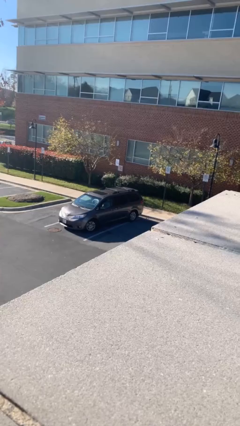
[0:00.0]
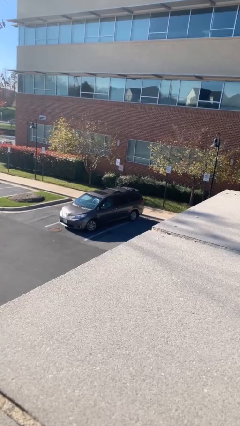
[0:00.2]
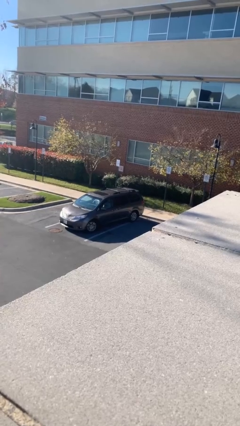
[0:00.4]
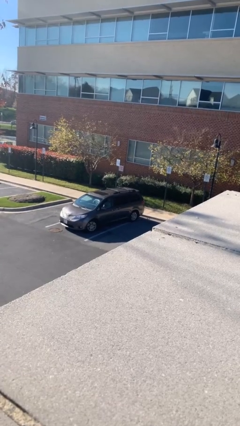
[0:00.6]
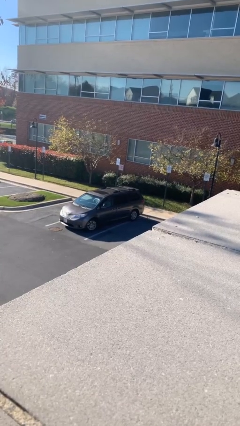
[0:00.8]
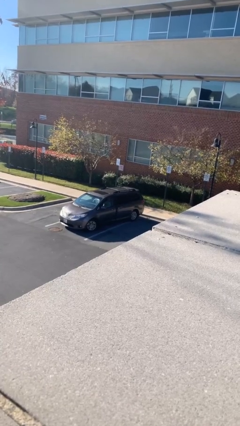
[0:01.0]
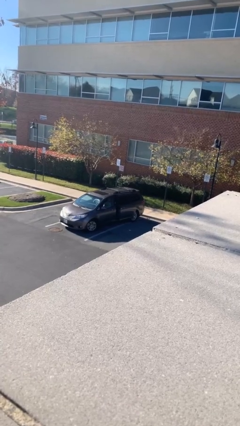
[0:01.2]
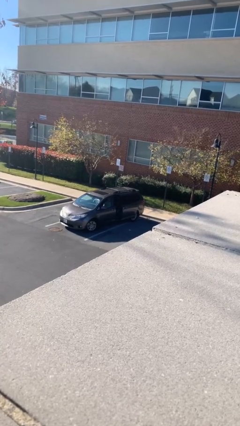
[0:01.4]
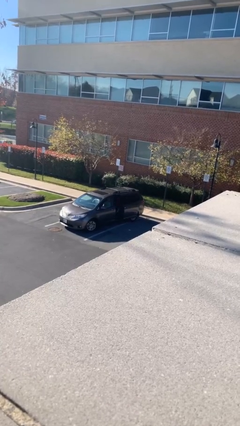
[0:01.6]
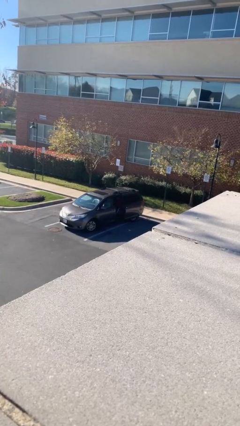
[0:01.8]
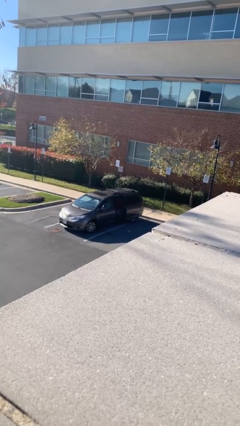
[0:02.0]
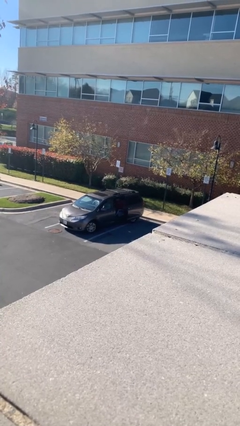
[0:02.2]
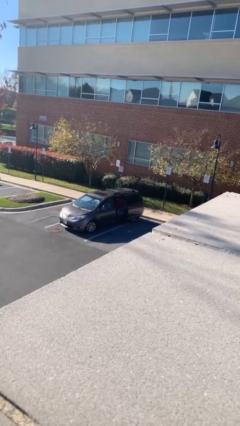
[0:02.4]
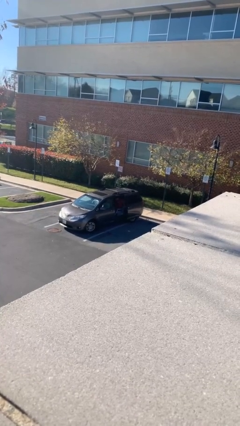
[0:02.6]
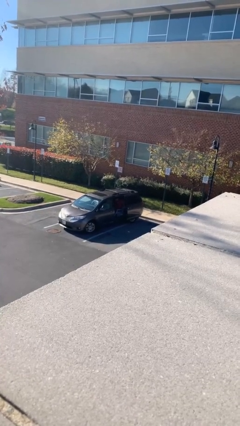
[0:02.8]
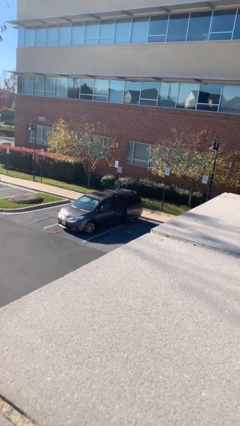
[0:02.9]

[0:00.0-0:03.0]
person opens car door

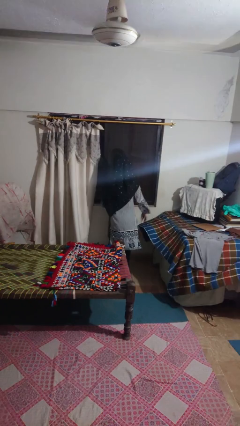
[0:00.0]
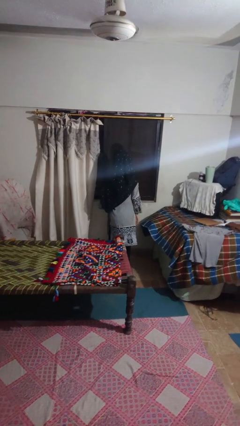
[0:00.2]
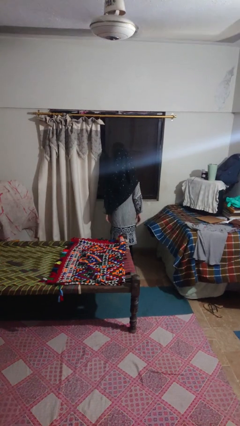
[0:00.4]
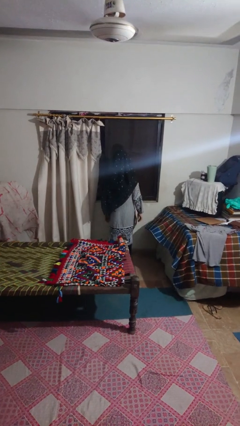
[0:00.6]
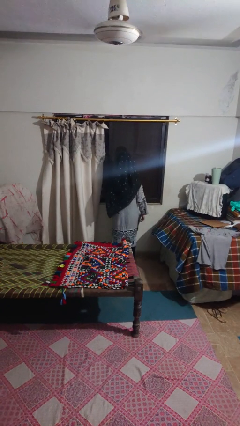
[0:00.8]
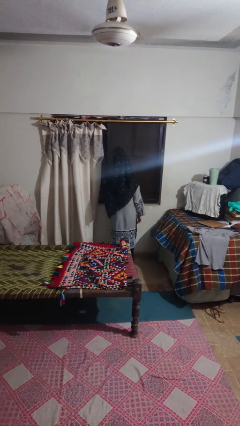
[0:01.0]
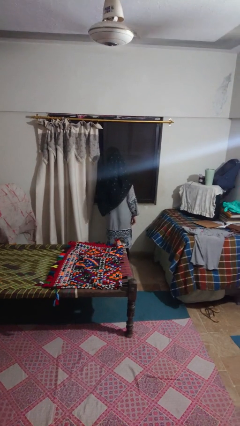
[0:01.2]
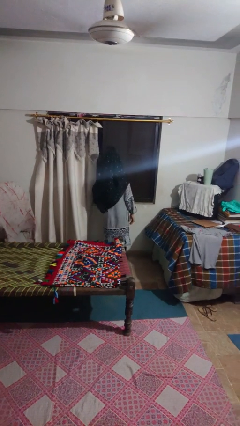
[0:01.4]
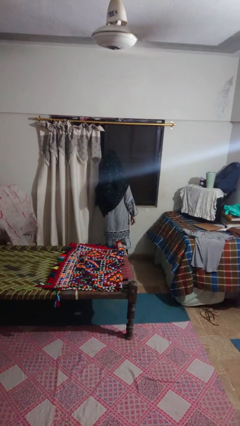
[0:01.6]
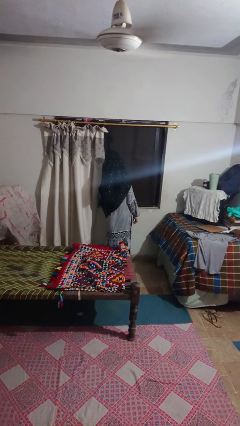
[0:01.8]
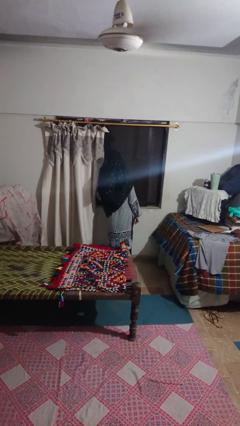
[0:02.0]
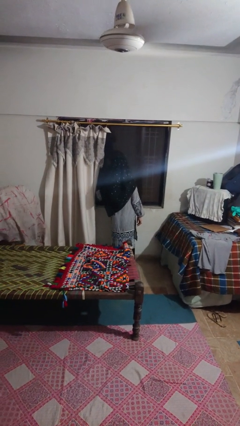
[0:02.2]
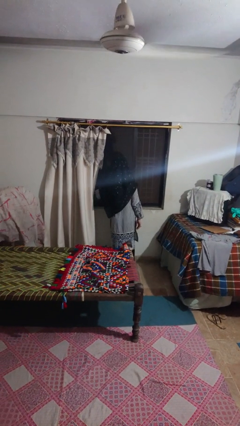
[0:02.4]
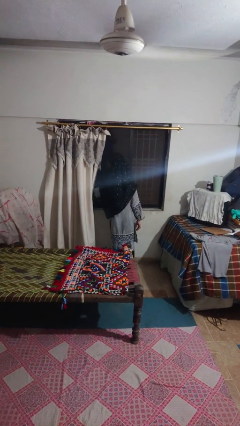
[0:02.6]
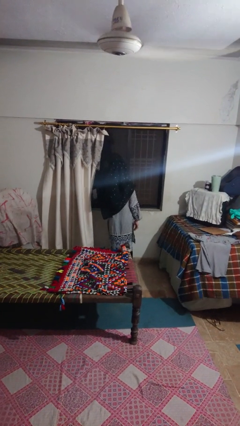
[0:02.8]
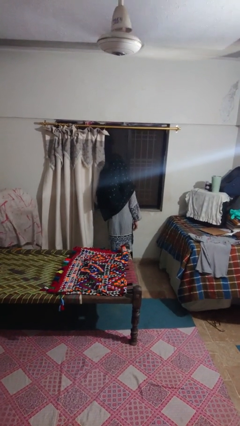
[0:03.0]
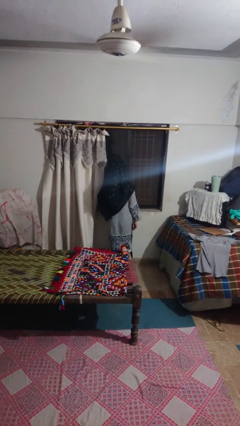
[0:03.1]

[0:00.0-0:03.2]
person opens home window

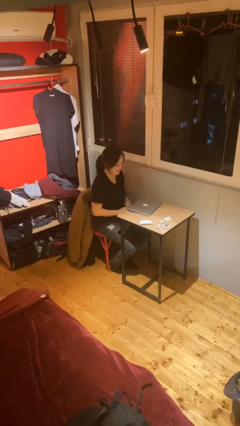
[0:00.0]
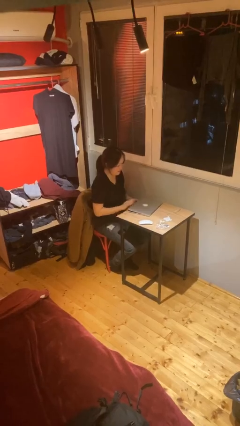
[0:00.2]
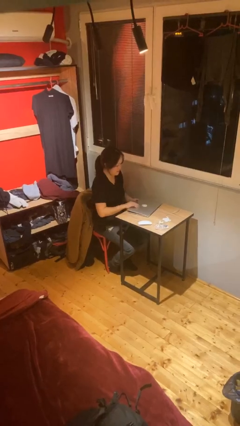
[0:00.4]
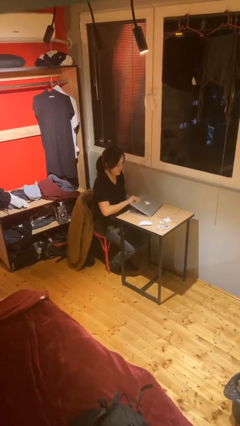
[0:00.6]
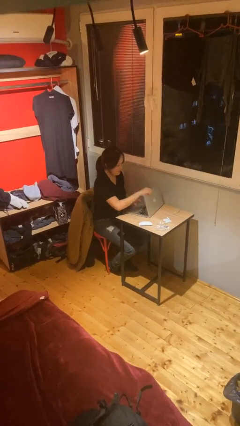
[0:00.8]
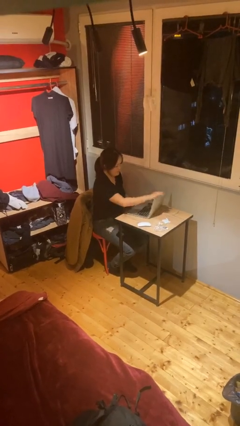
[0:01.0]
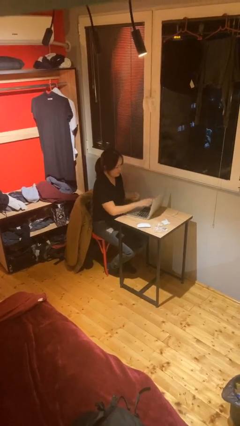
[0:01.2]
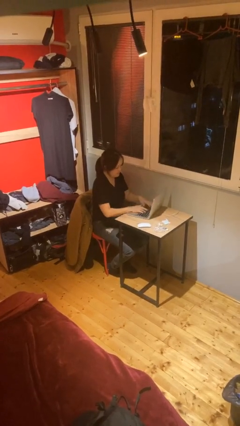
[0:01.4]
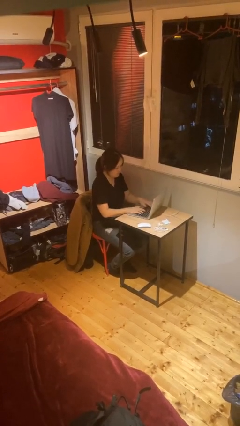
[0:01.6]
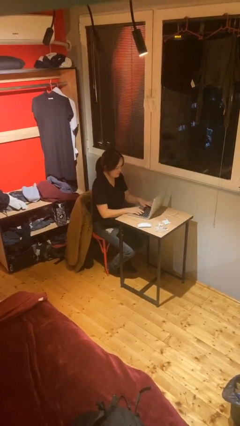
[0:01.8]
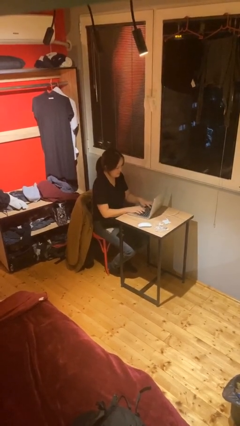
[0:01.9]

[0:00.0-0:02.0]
person interacts with laptop

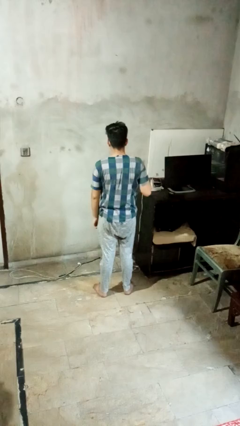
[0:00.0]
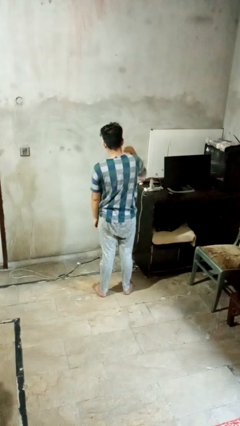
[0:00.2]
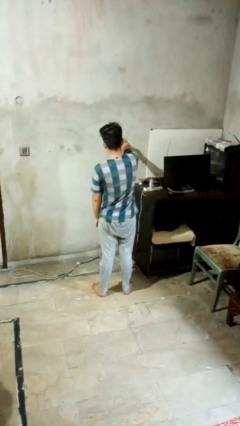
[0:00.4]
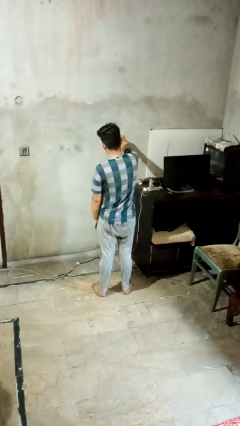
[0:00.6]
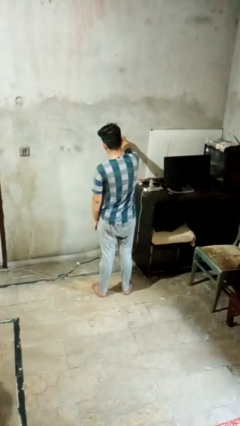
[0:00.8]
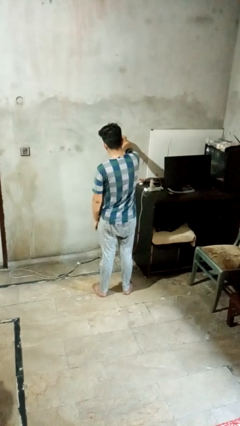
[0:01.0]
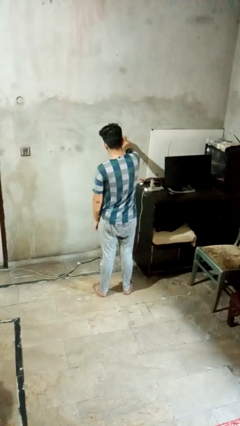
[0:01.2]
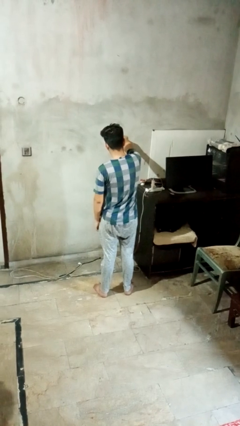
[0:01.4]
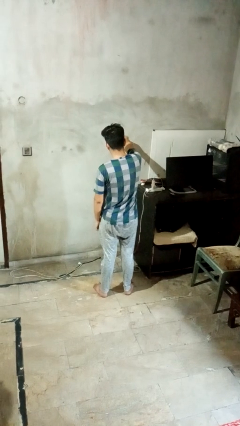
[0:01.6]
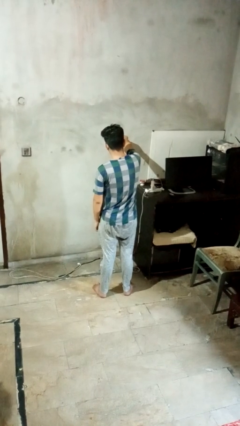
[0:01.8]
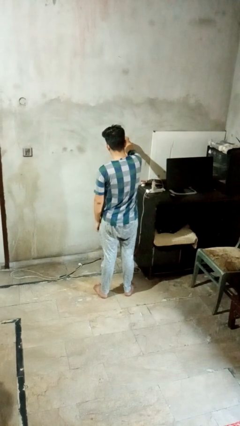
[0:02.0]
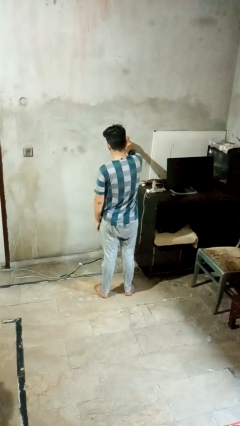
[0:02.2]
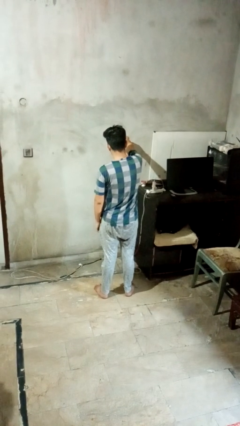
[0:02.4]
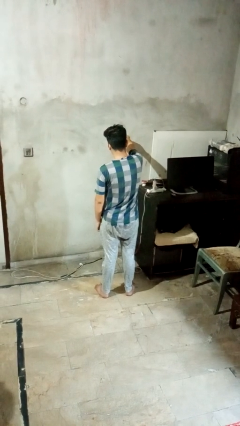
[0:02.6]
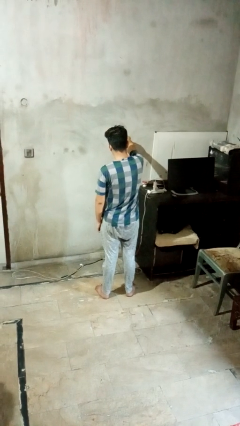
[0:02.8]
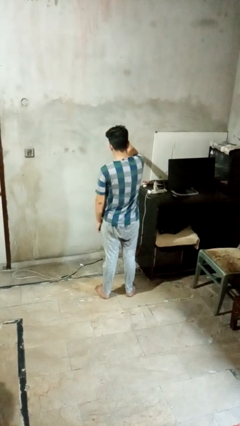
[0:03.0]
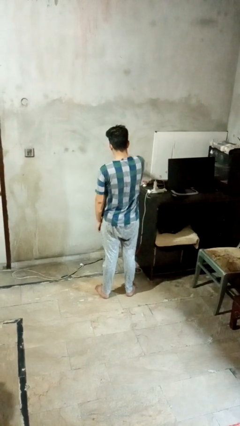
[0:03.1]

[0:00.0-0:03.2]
person punches

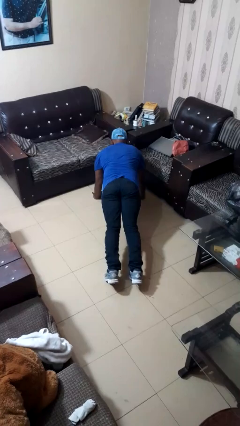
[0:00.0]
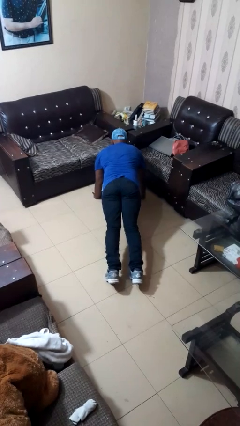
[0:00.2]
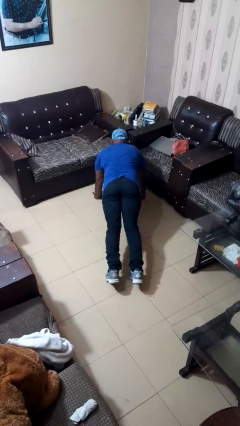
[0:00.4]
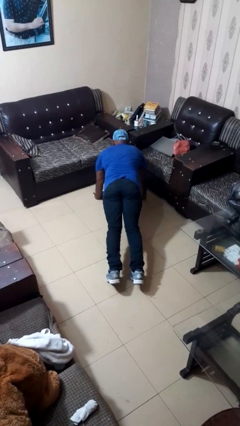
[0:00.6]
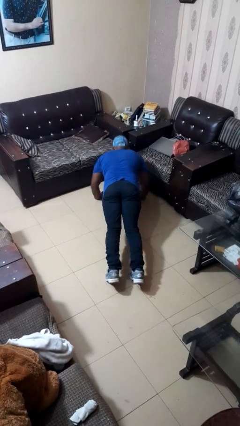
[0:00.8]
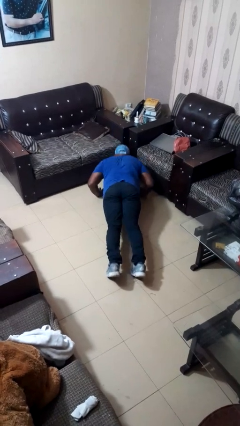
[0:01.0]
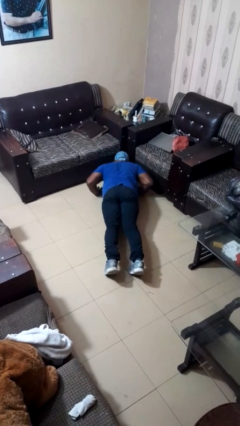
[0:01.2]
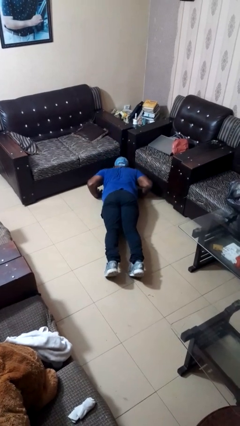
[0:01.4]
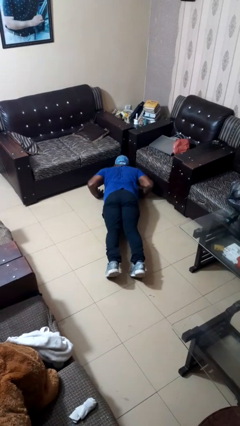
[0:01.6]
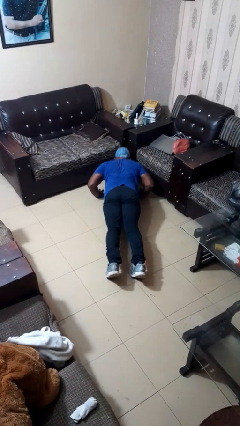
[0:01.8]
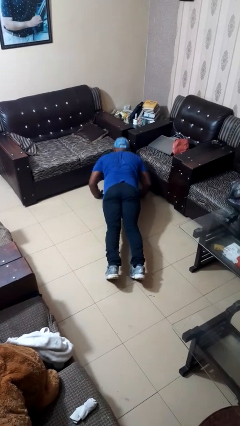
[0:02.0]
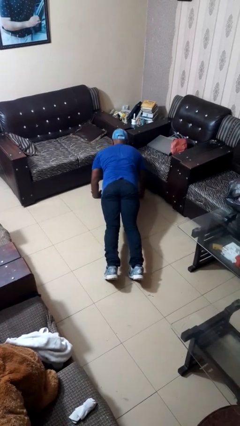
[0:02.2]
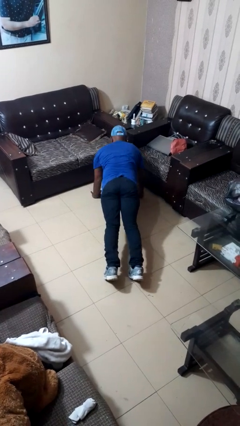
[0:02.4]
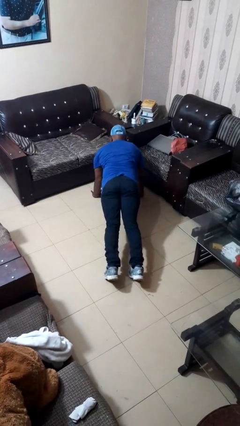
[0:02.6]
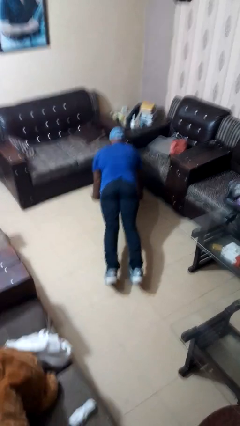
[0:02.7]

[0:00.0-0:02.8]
person exercises with pushup

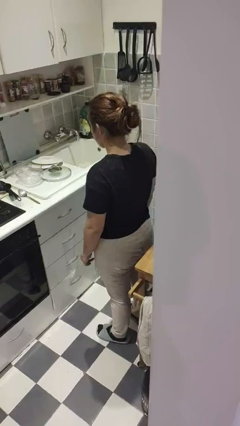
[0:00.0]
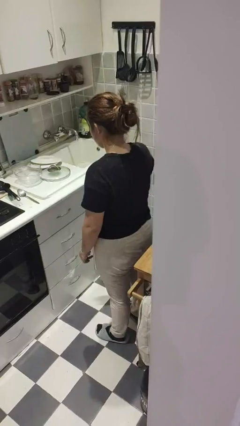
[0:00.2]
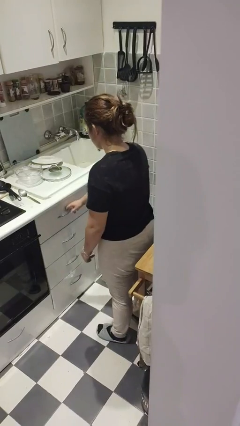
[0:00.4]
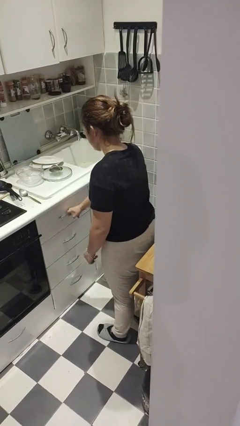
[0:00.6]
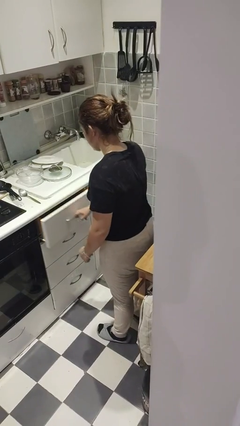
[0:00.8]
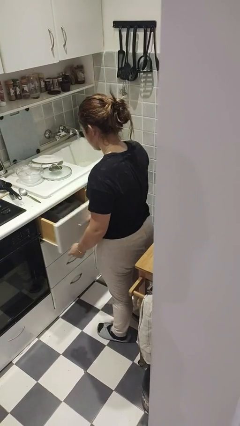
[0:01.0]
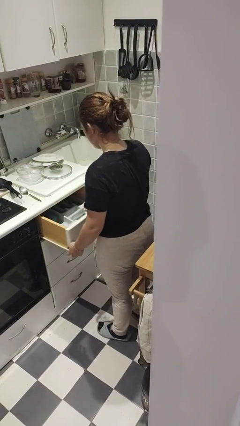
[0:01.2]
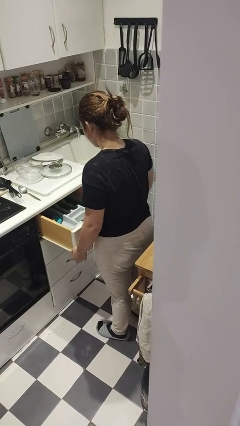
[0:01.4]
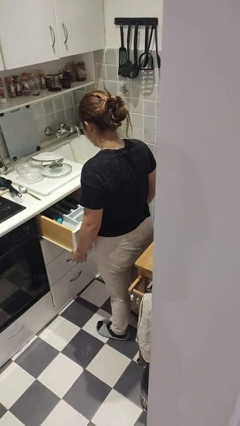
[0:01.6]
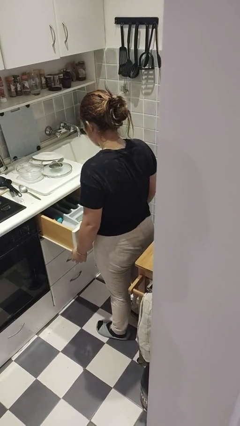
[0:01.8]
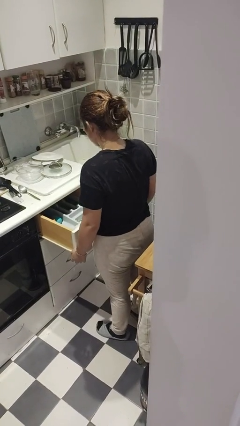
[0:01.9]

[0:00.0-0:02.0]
person opens kitchen drawer

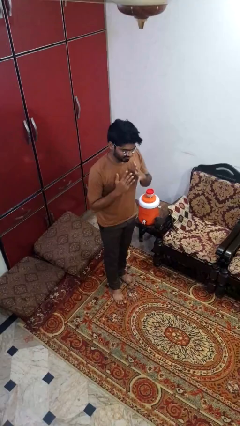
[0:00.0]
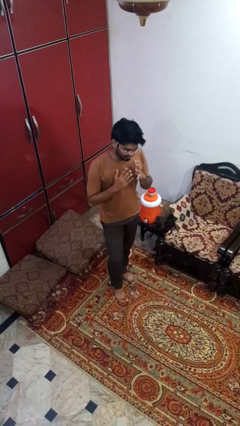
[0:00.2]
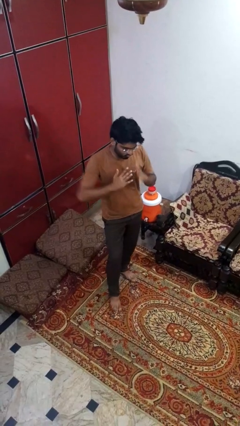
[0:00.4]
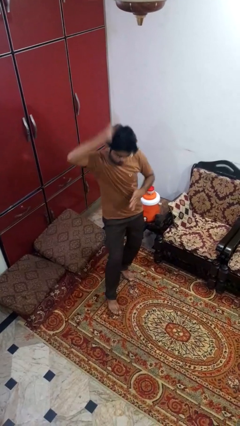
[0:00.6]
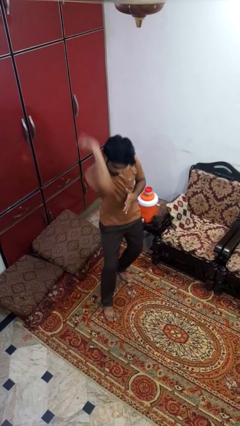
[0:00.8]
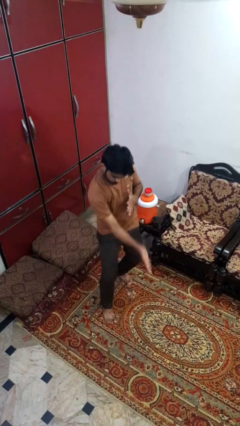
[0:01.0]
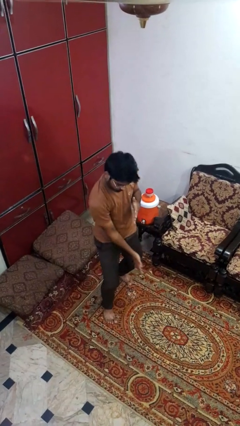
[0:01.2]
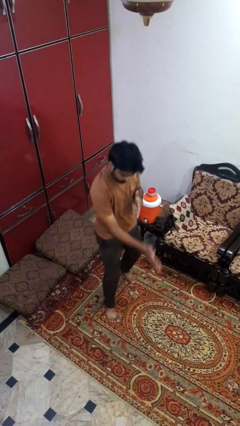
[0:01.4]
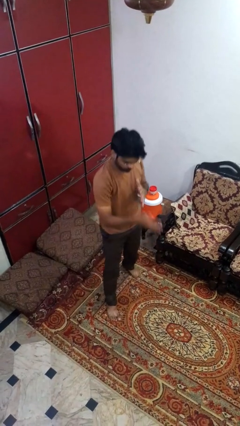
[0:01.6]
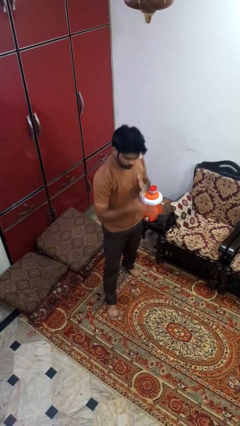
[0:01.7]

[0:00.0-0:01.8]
person karate chop
